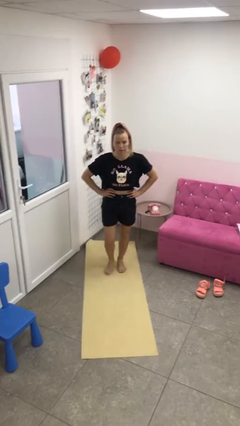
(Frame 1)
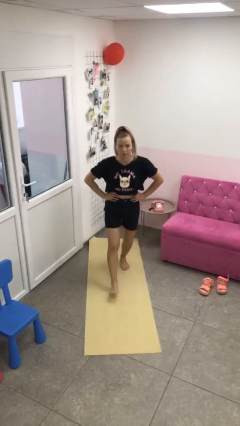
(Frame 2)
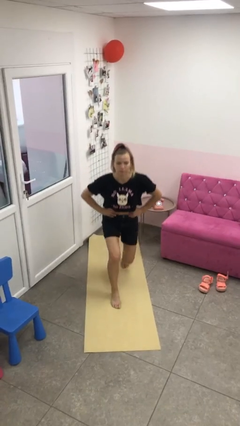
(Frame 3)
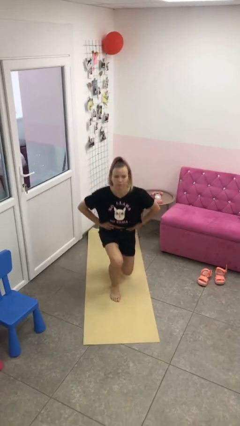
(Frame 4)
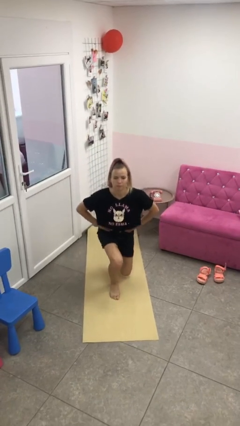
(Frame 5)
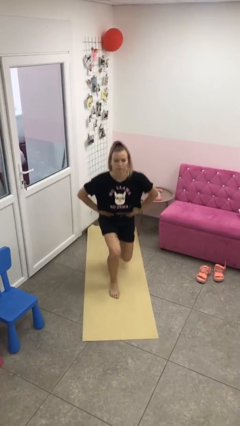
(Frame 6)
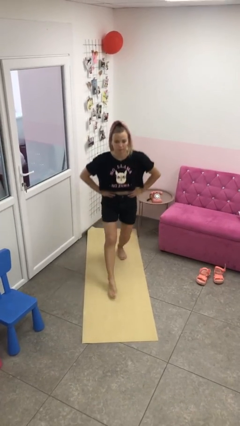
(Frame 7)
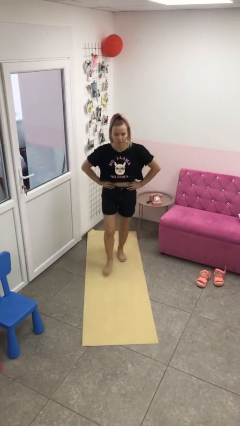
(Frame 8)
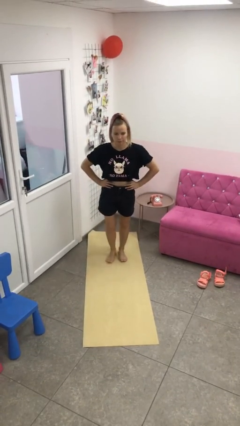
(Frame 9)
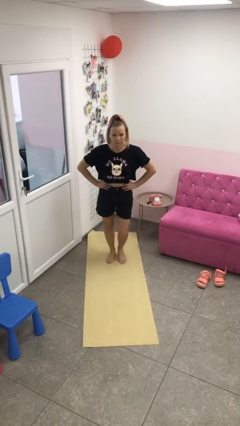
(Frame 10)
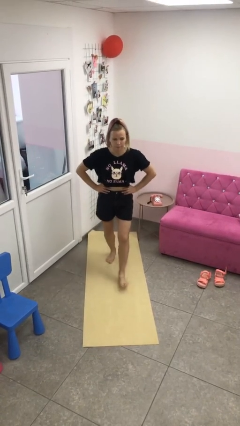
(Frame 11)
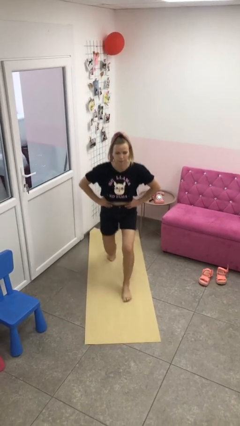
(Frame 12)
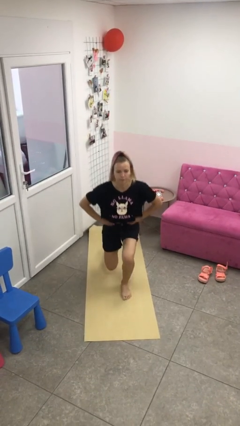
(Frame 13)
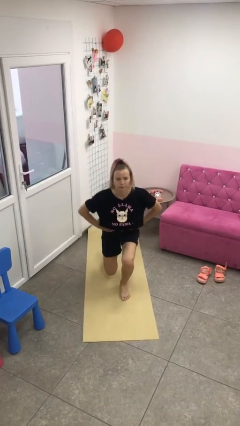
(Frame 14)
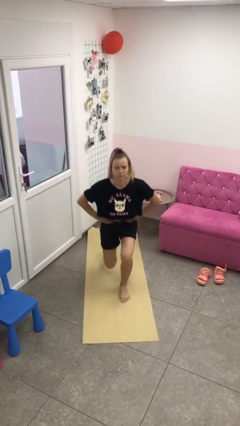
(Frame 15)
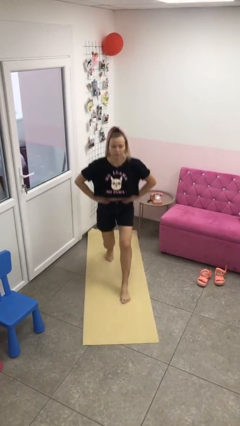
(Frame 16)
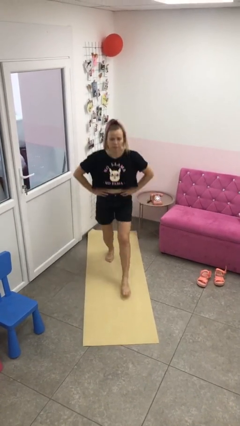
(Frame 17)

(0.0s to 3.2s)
person exercises with lunges

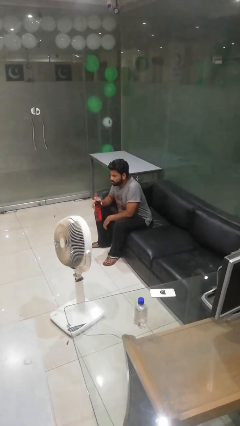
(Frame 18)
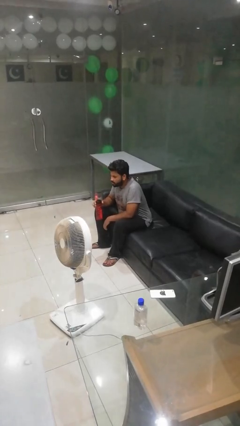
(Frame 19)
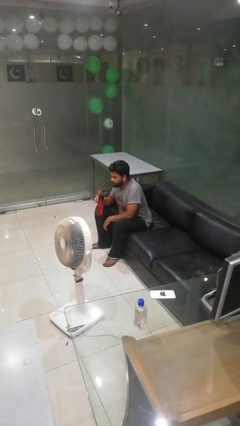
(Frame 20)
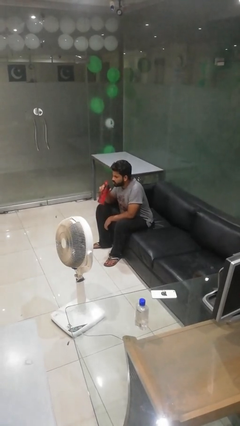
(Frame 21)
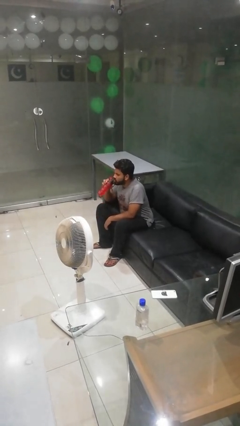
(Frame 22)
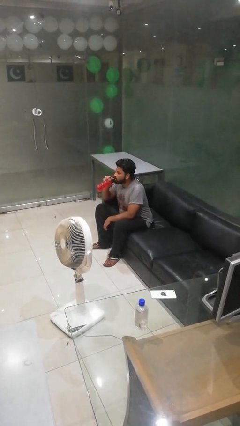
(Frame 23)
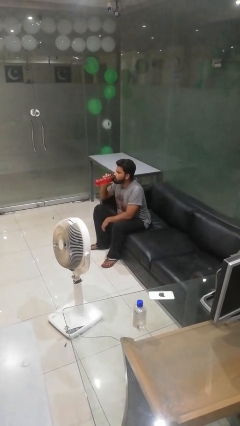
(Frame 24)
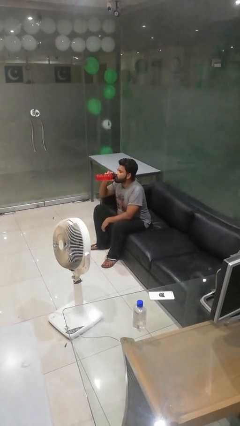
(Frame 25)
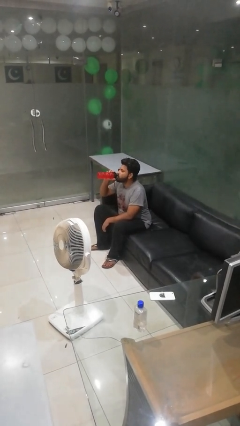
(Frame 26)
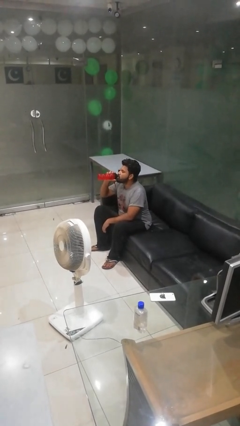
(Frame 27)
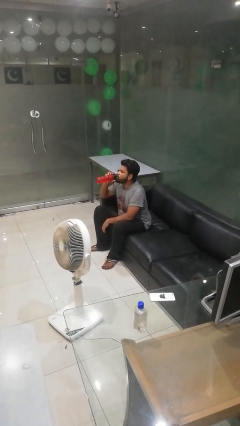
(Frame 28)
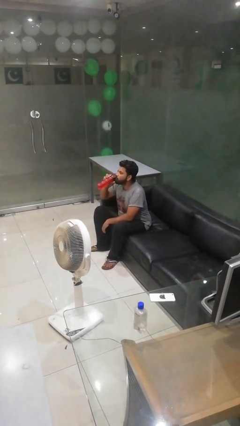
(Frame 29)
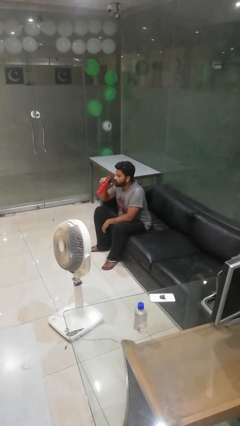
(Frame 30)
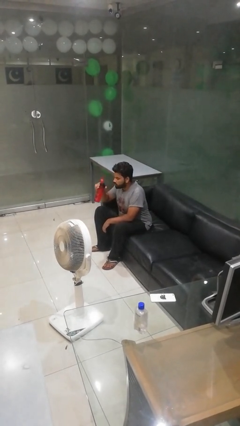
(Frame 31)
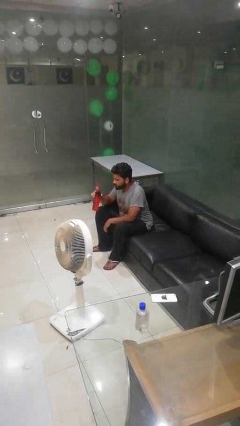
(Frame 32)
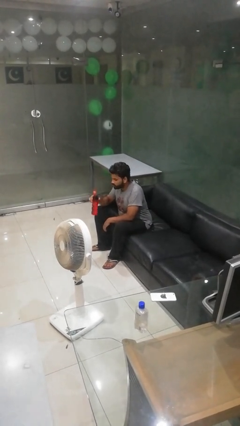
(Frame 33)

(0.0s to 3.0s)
person drinks from bottle

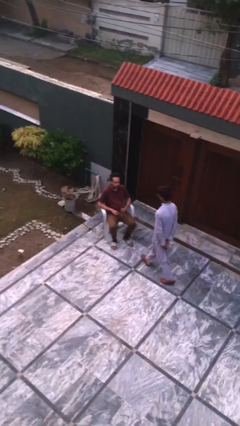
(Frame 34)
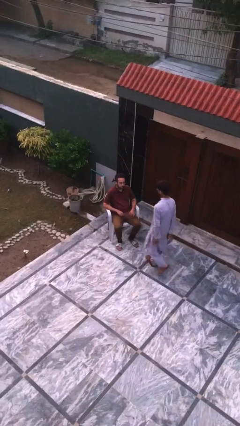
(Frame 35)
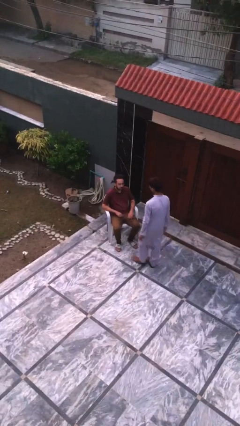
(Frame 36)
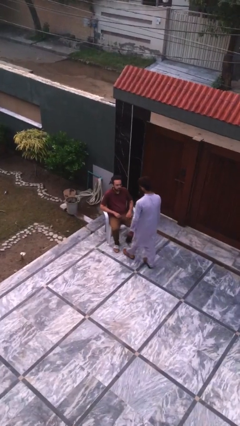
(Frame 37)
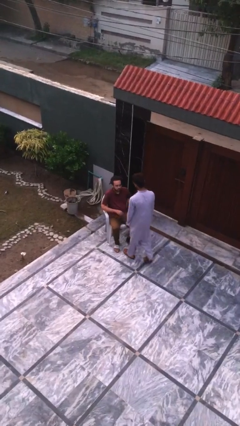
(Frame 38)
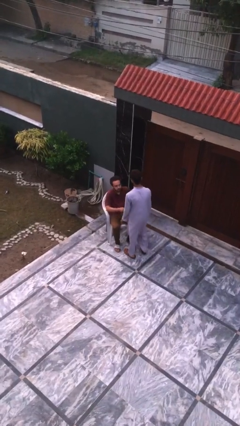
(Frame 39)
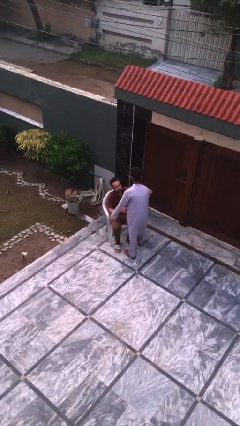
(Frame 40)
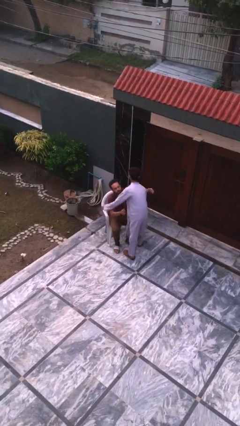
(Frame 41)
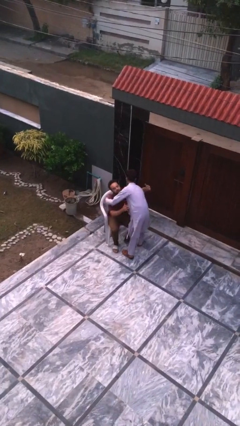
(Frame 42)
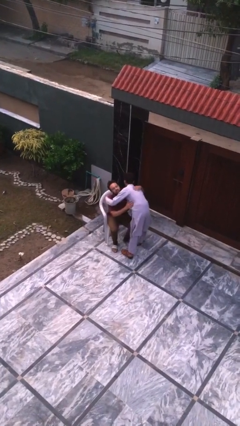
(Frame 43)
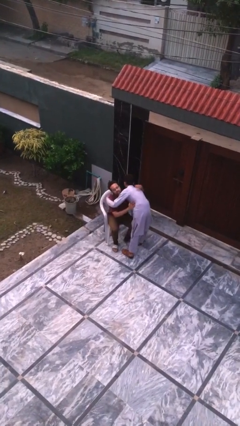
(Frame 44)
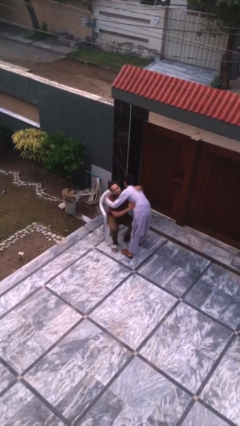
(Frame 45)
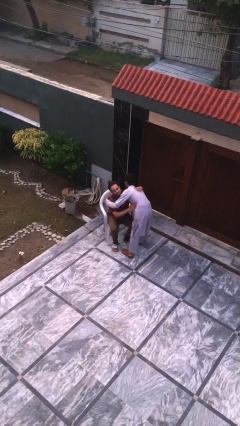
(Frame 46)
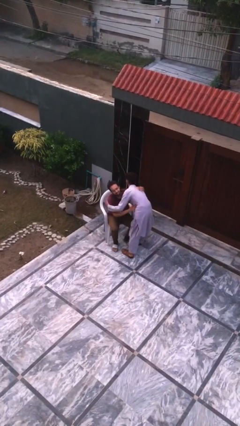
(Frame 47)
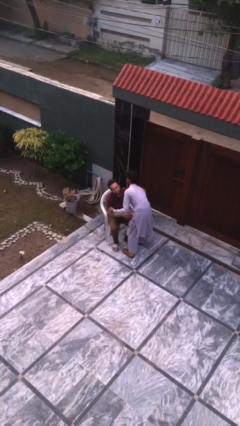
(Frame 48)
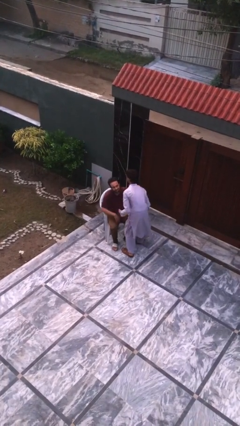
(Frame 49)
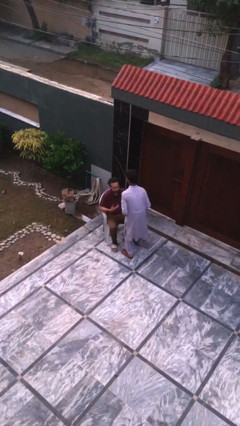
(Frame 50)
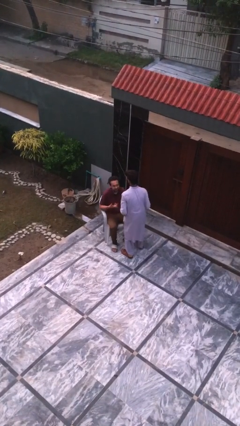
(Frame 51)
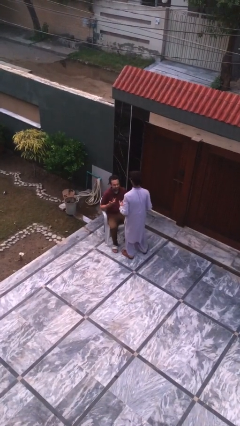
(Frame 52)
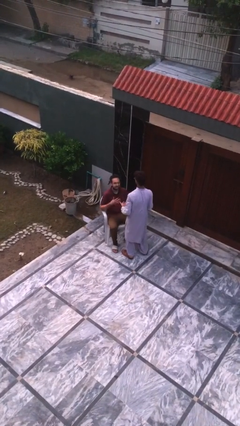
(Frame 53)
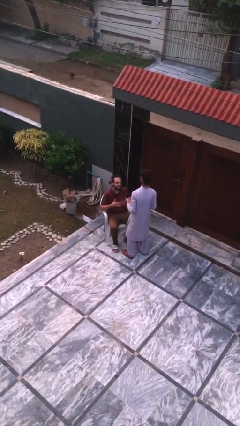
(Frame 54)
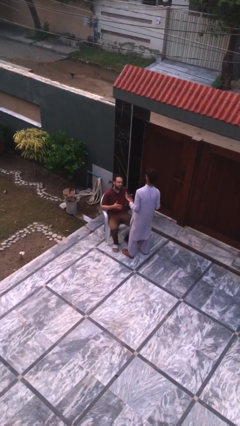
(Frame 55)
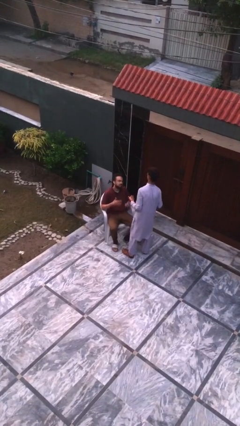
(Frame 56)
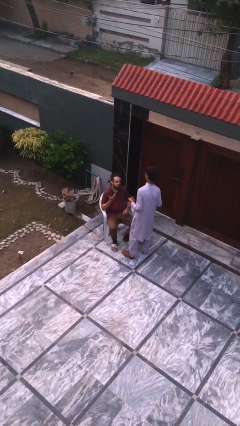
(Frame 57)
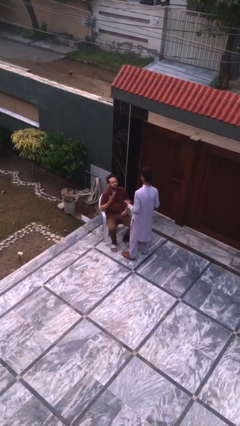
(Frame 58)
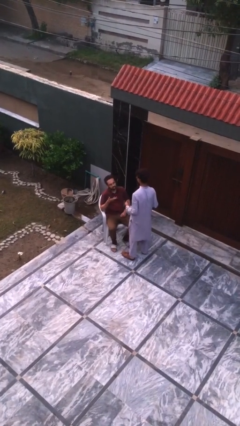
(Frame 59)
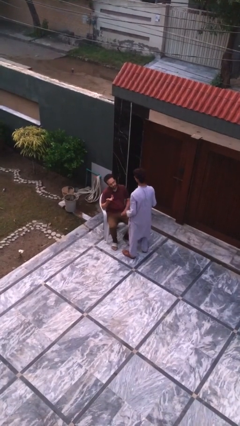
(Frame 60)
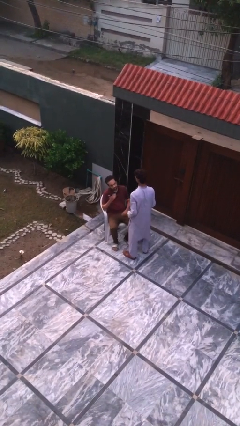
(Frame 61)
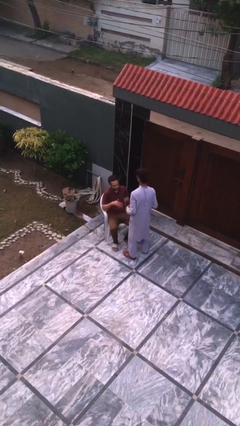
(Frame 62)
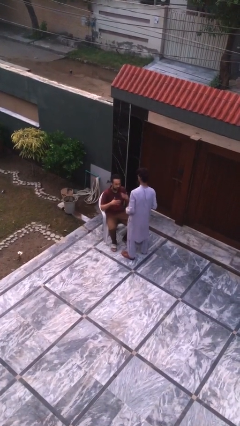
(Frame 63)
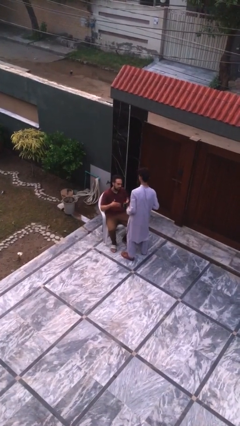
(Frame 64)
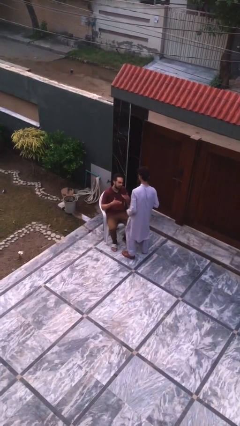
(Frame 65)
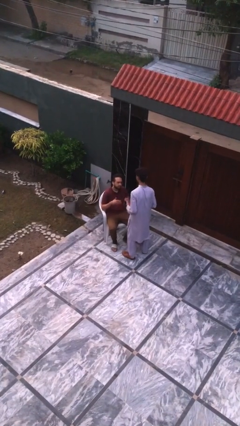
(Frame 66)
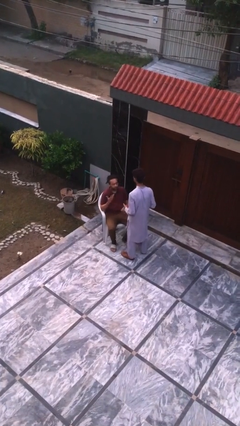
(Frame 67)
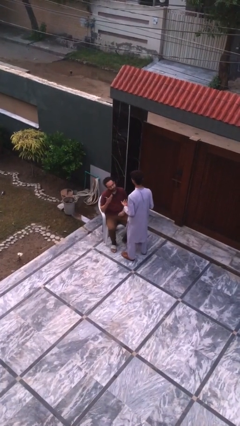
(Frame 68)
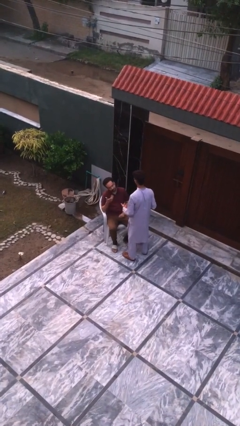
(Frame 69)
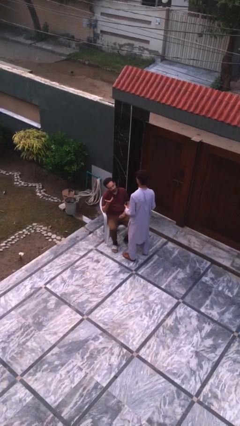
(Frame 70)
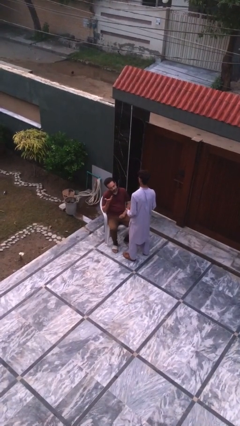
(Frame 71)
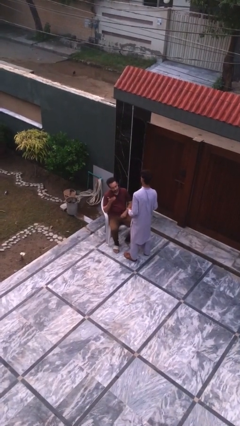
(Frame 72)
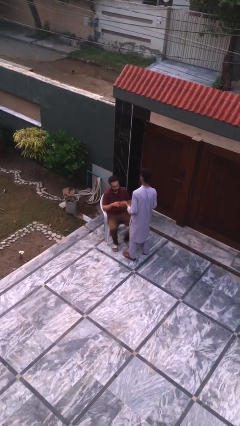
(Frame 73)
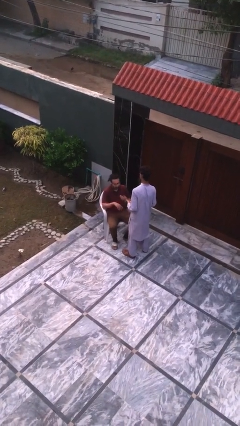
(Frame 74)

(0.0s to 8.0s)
person embraces person

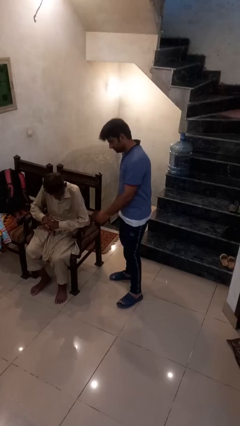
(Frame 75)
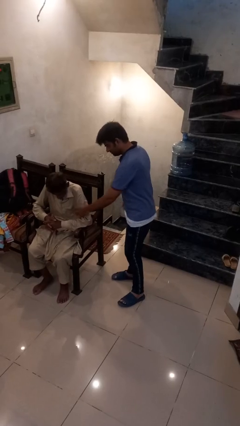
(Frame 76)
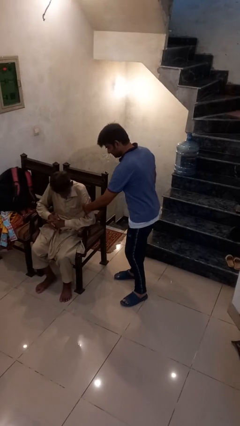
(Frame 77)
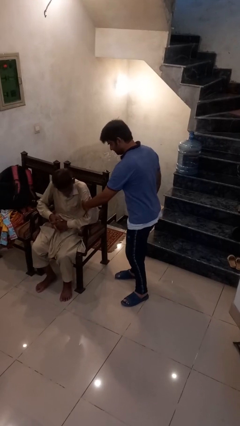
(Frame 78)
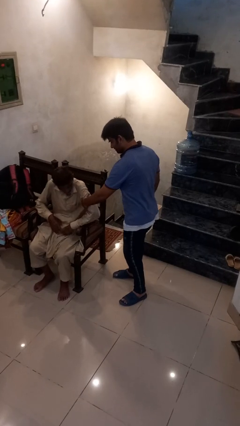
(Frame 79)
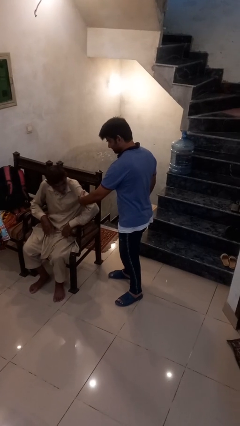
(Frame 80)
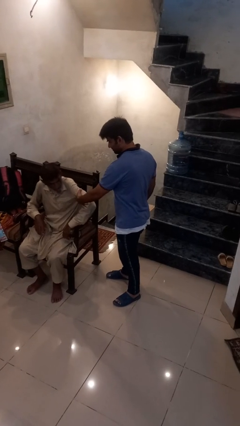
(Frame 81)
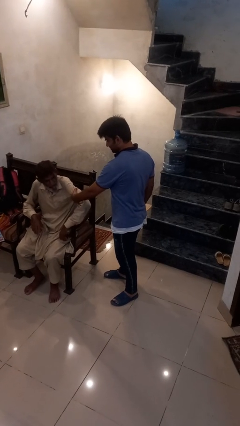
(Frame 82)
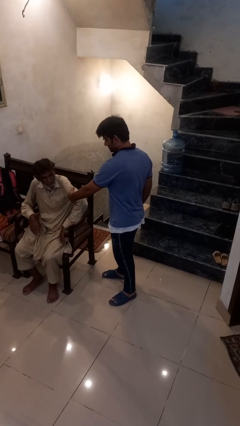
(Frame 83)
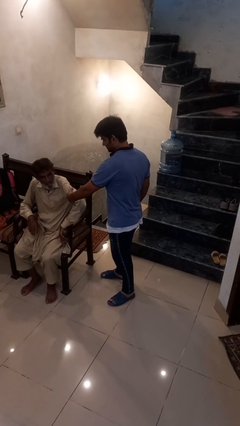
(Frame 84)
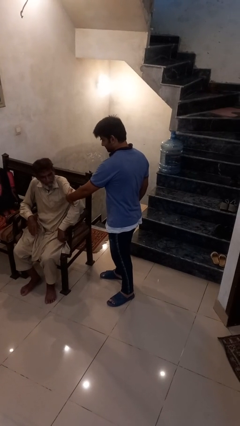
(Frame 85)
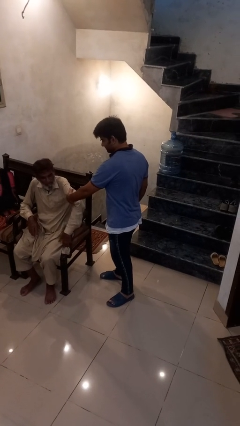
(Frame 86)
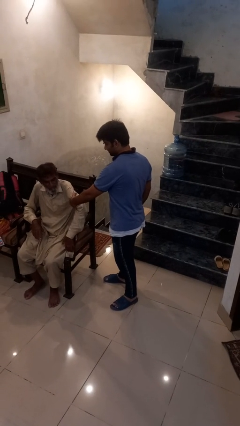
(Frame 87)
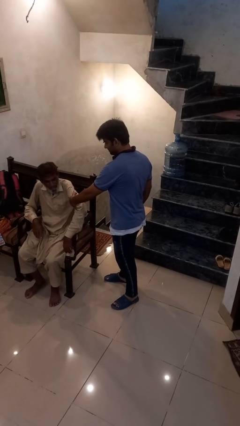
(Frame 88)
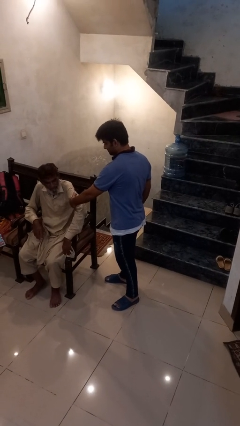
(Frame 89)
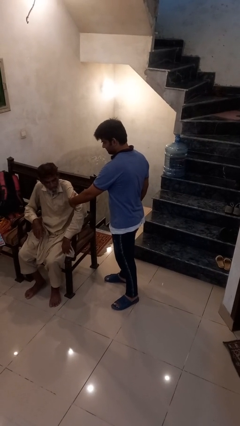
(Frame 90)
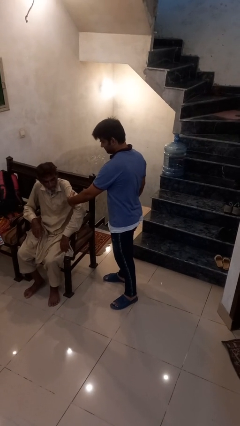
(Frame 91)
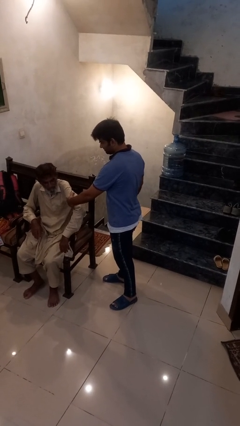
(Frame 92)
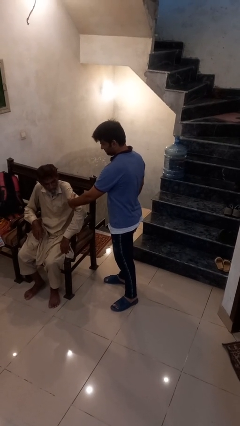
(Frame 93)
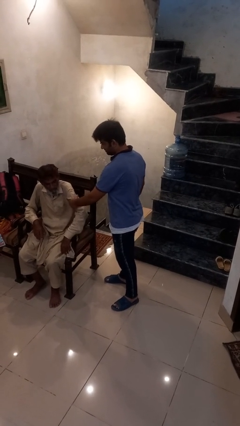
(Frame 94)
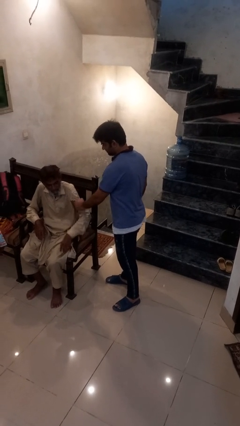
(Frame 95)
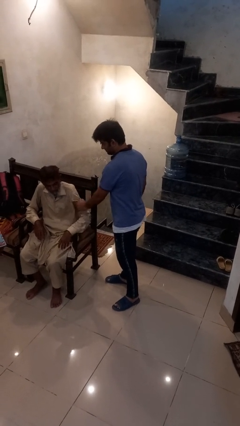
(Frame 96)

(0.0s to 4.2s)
person grabs person by bicep
